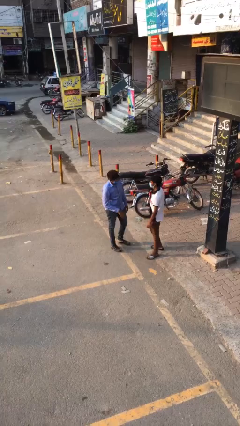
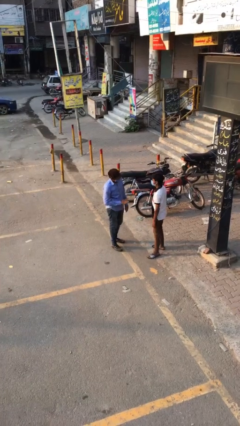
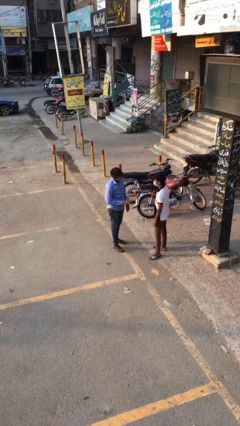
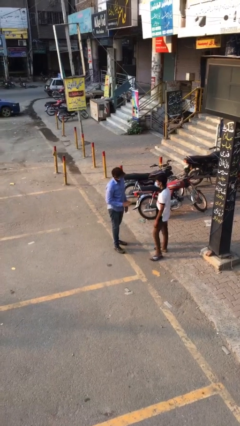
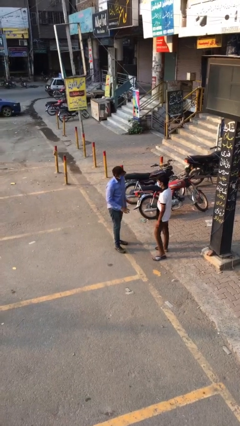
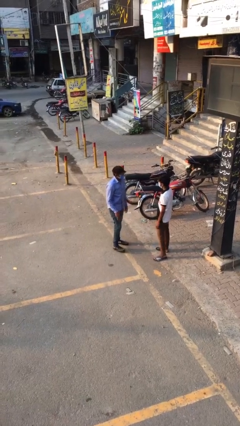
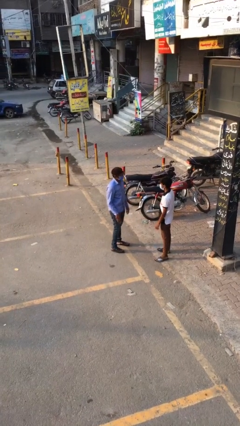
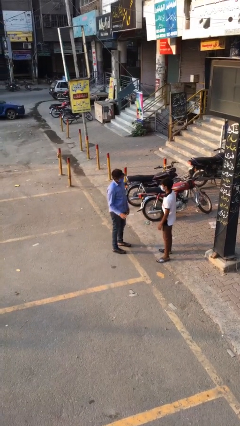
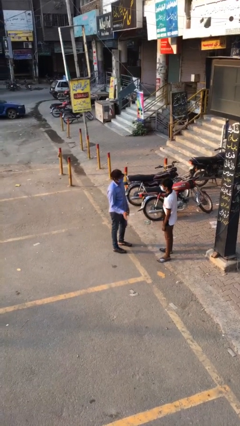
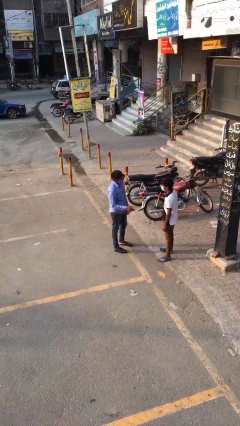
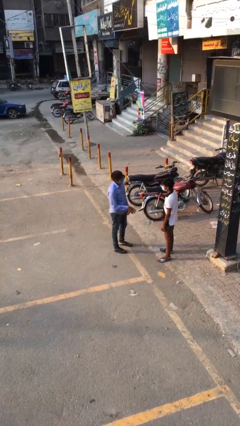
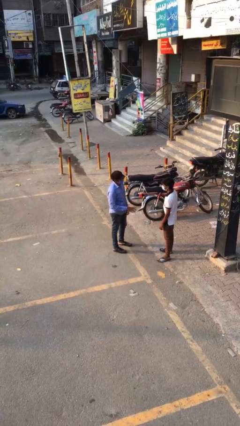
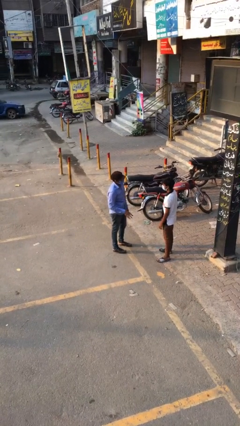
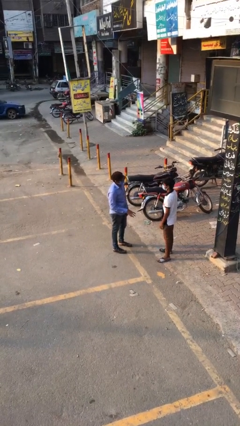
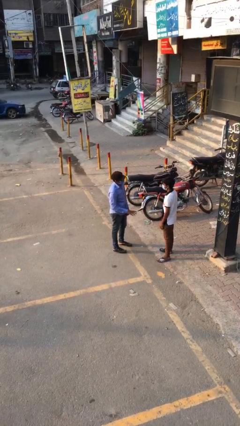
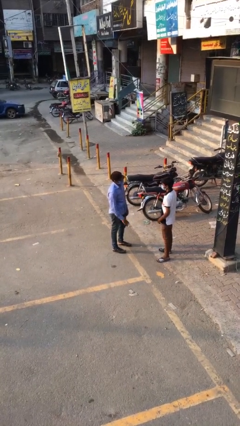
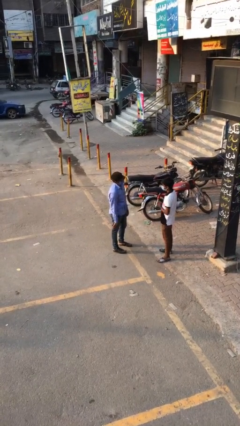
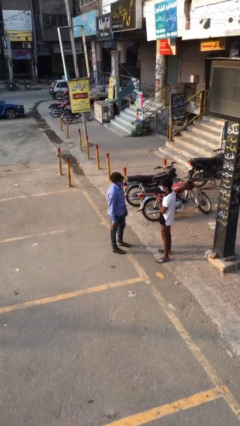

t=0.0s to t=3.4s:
person talks to person

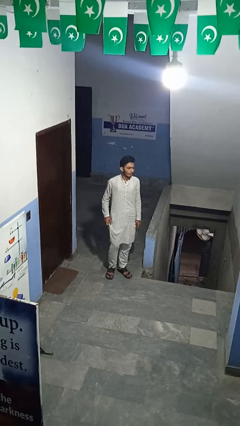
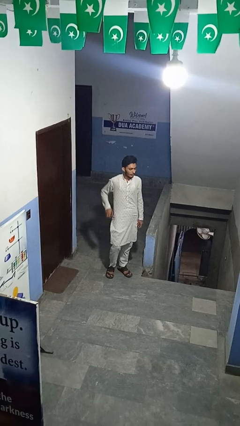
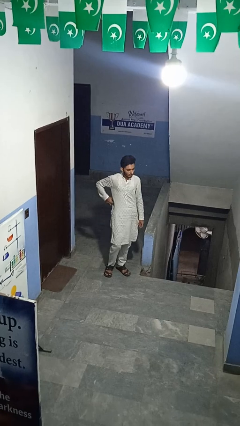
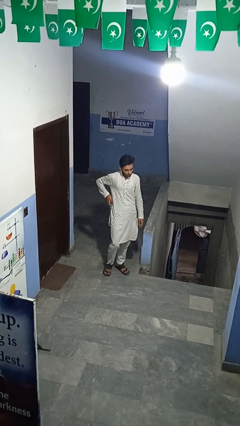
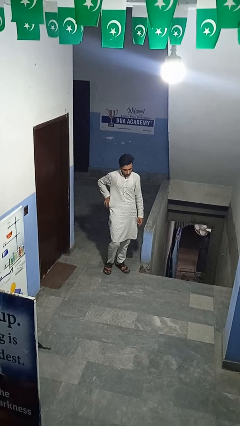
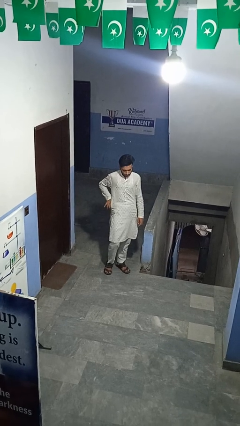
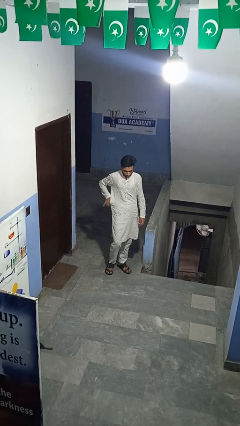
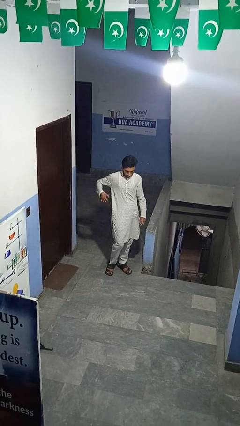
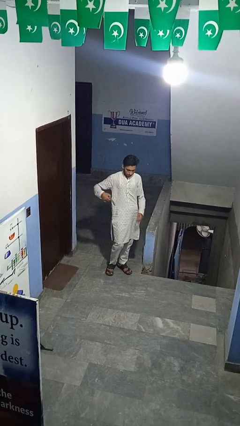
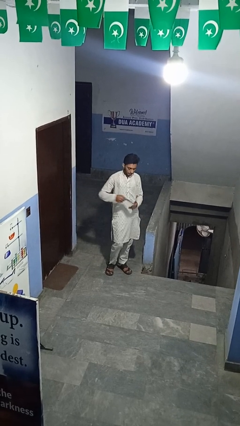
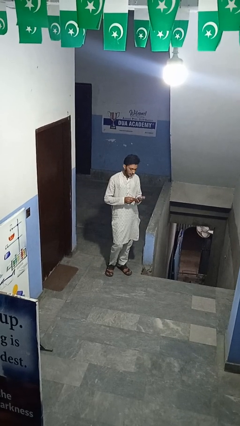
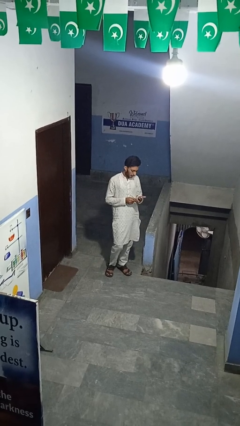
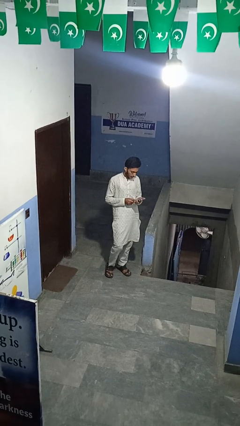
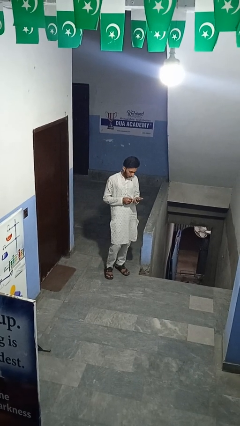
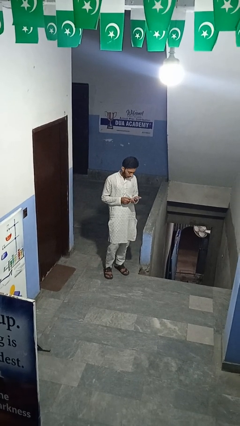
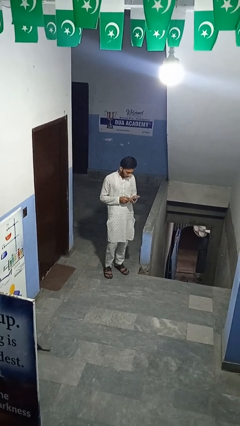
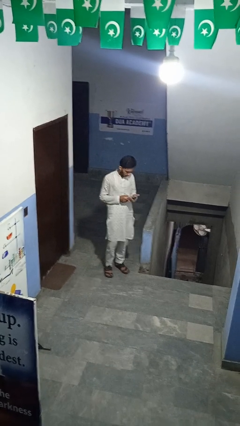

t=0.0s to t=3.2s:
person puts hands in back pockets

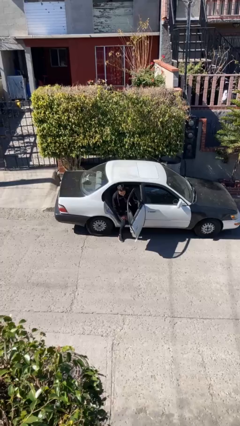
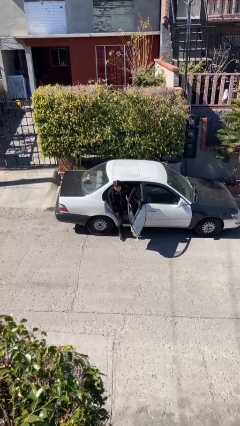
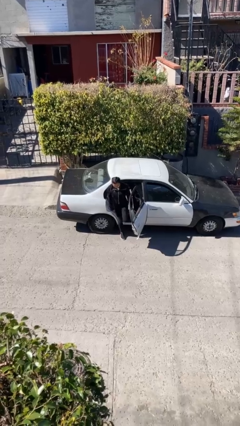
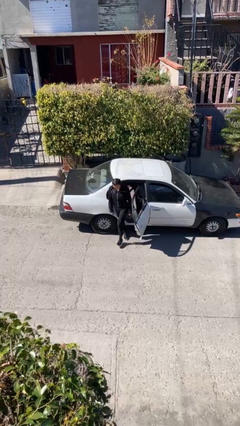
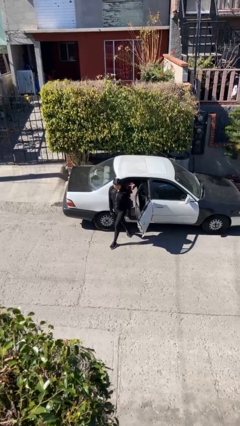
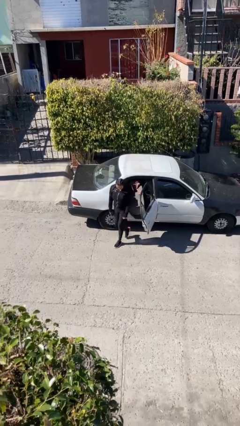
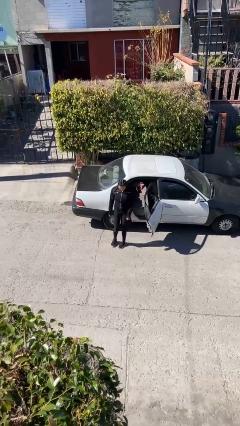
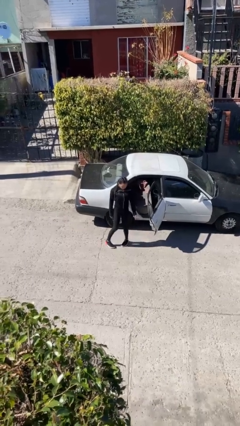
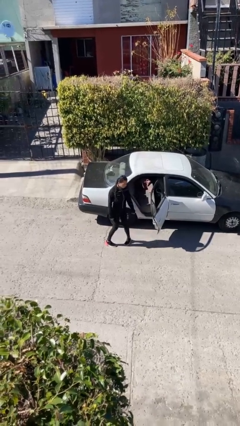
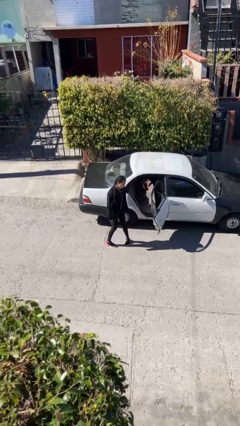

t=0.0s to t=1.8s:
person exits car

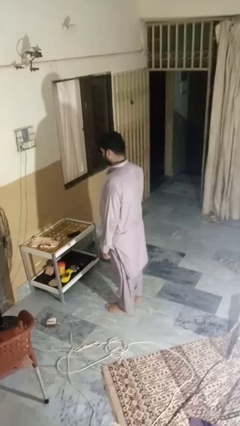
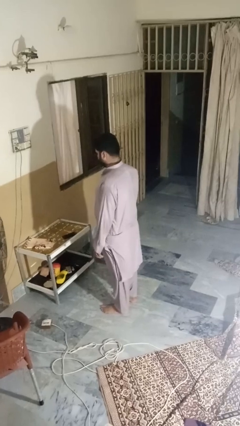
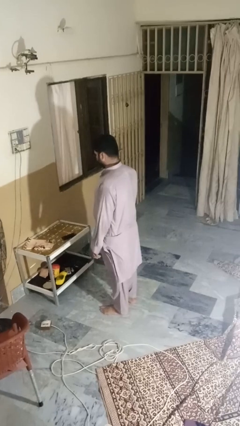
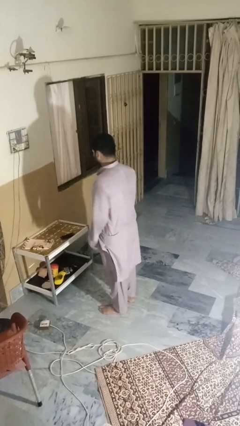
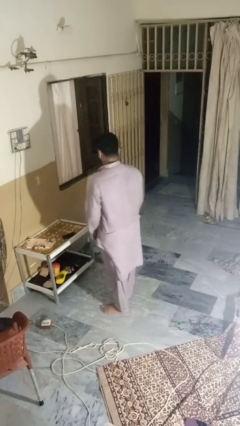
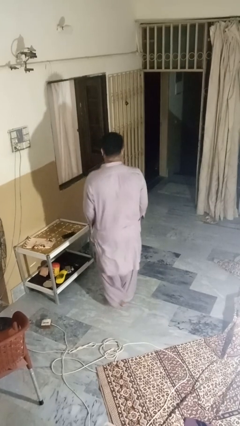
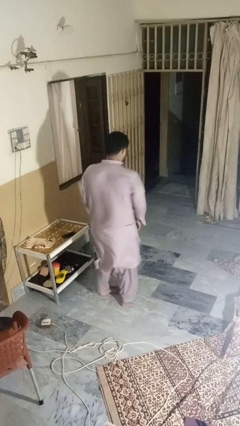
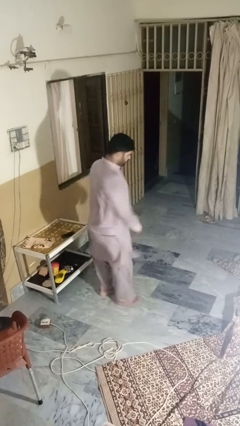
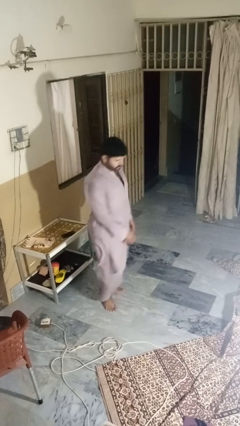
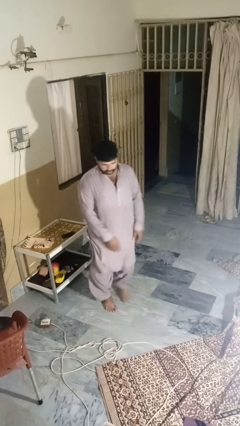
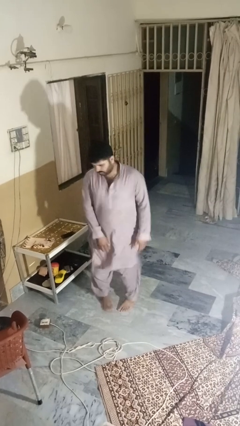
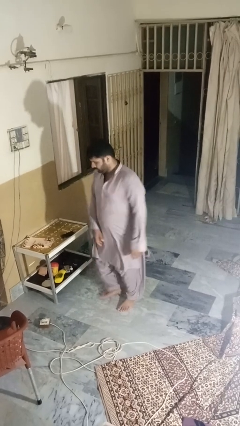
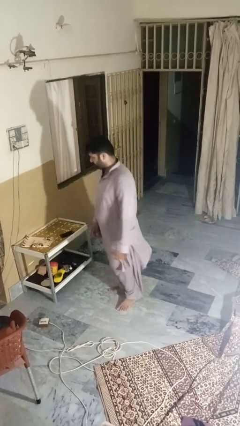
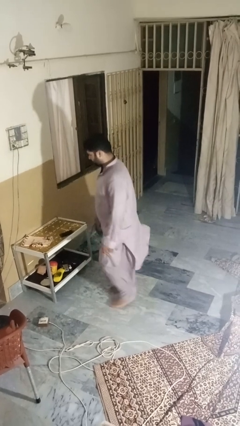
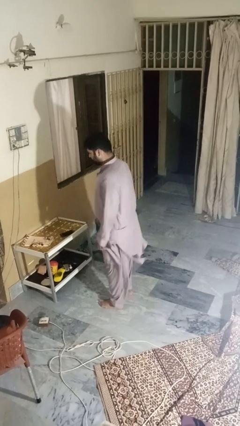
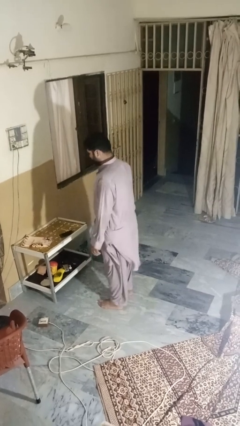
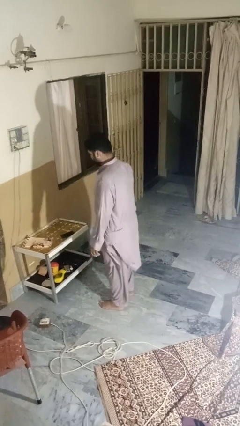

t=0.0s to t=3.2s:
person twirls

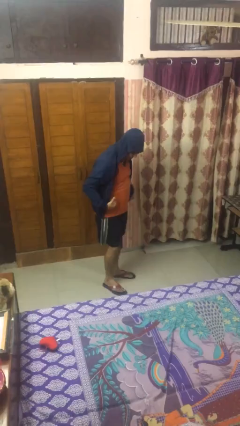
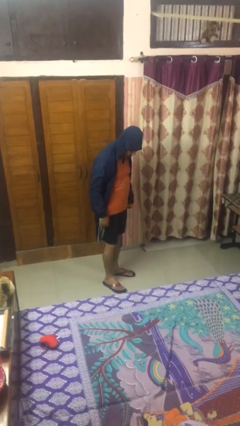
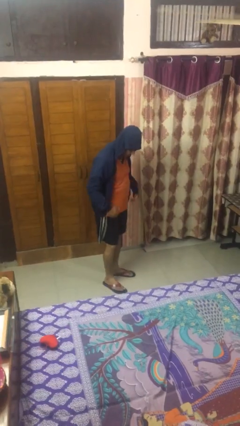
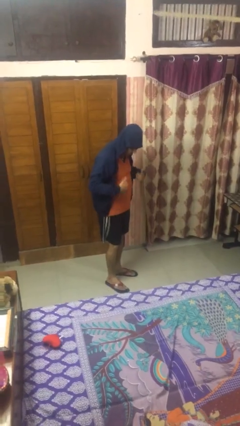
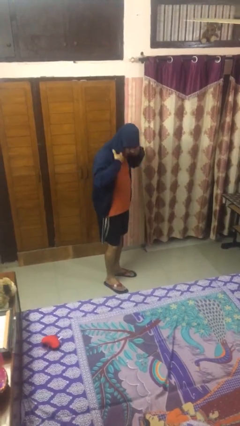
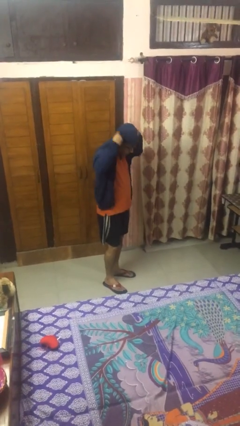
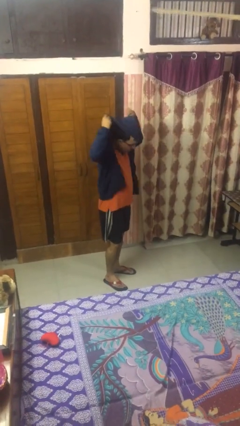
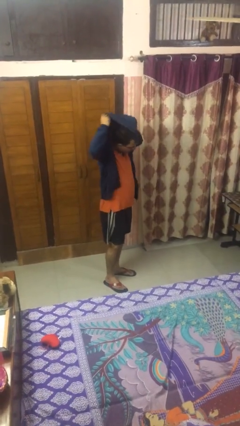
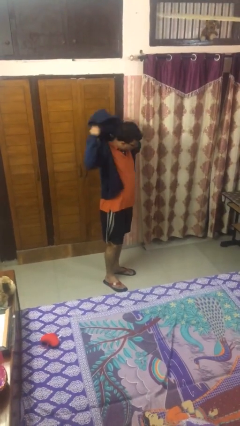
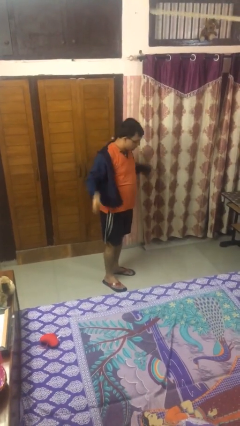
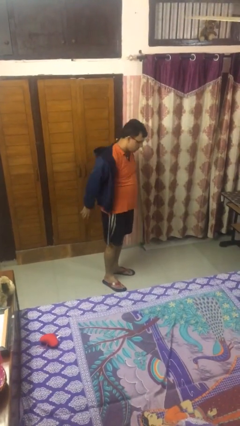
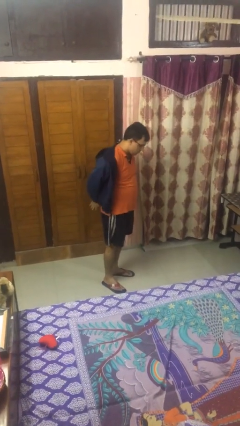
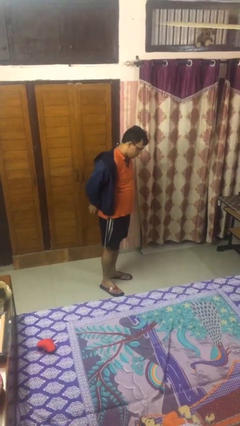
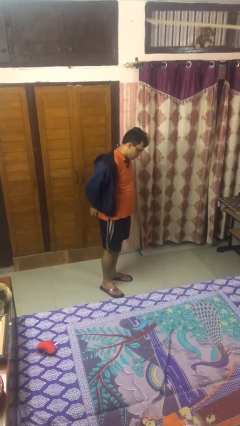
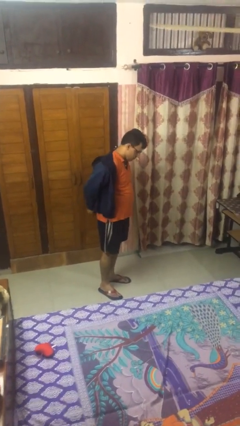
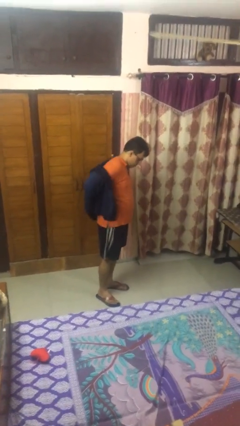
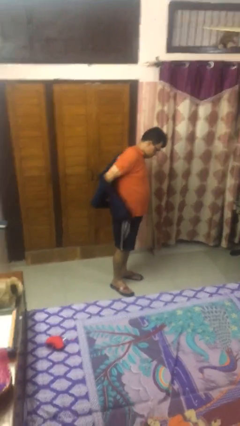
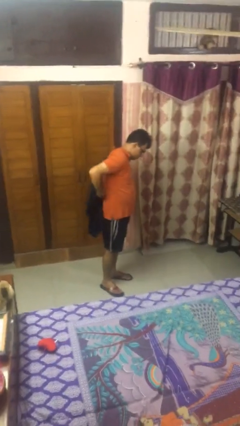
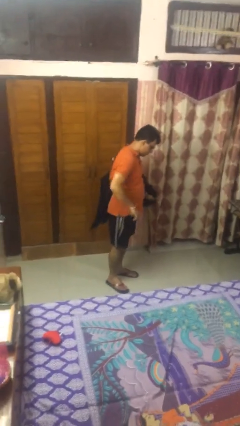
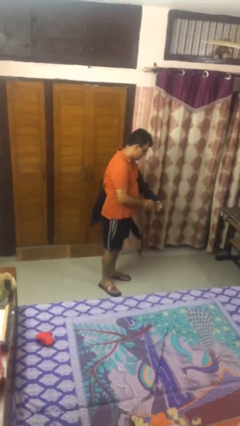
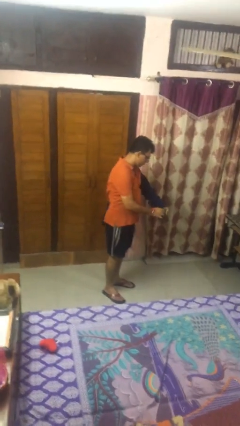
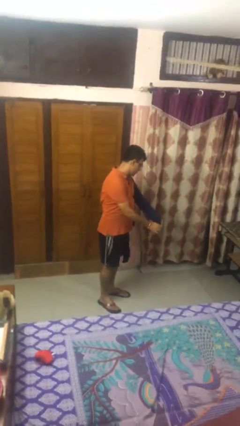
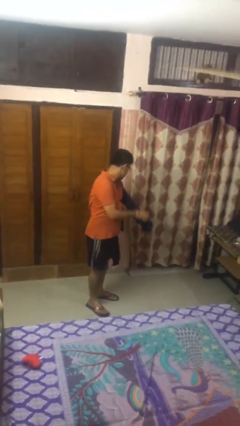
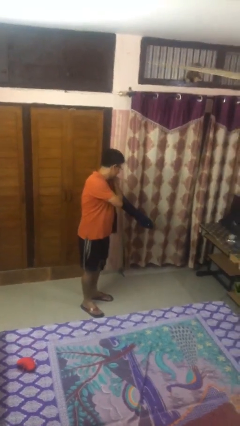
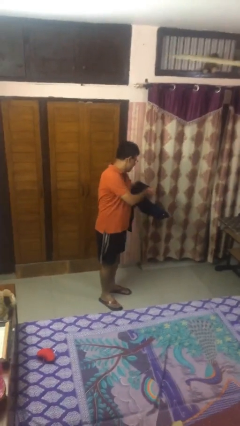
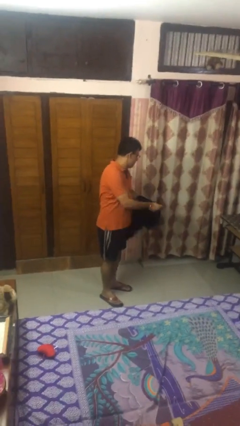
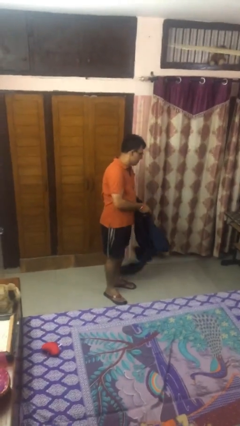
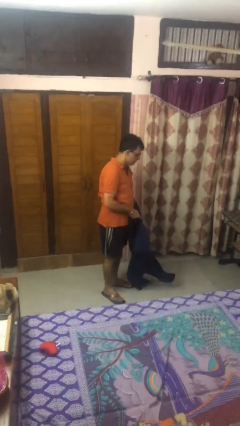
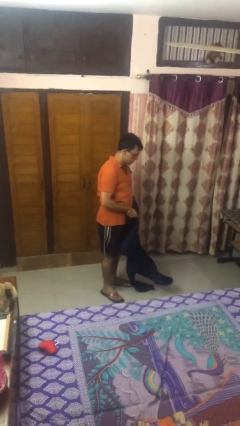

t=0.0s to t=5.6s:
person takes off hoodie

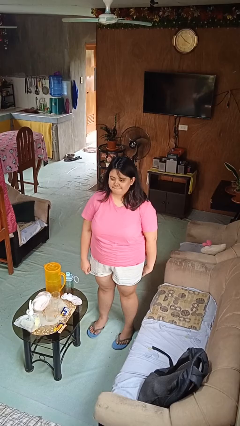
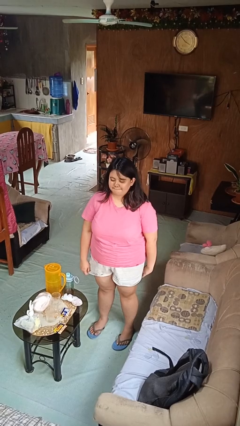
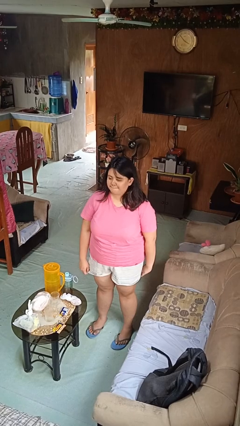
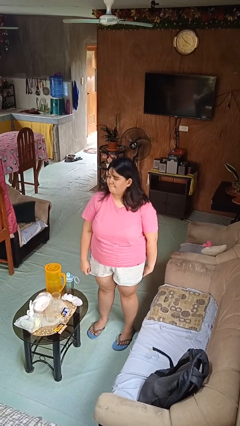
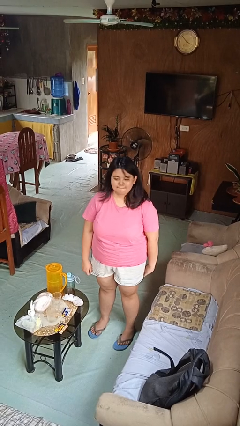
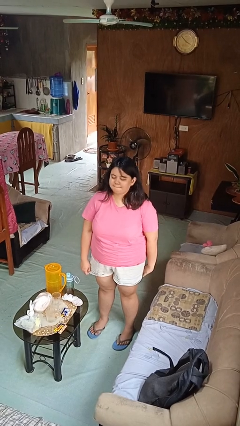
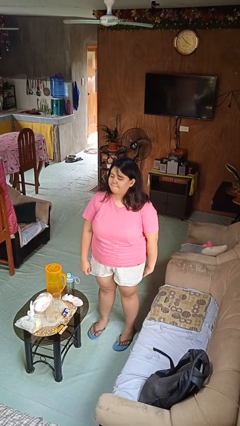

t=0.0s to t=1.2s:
person shakes head
